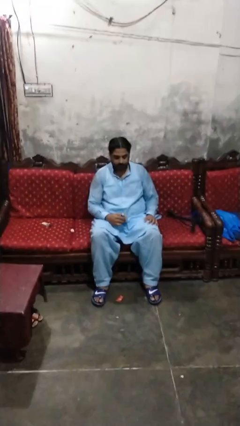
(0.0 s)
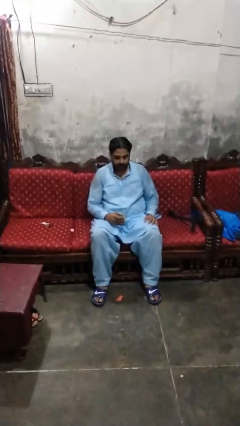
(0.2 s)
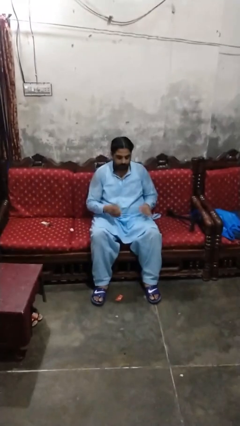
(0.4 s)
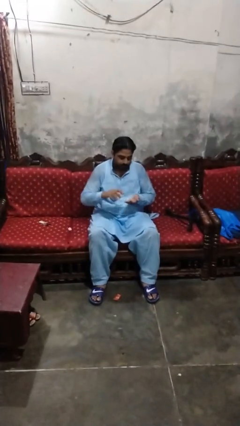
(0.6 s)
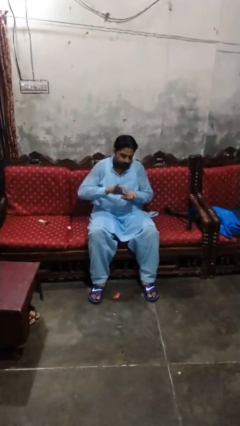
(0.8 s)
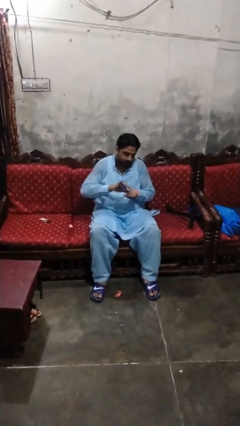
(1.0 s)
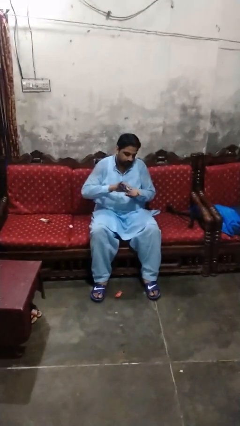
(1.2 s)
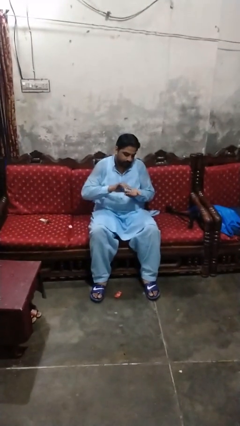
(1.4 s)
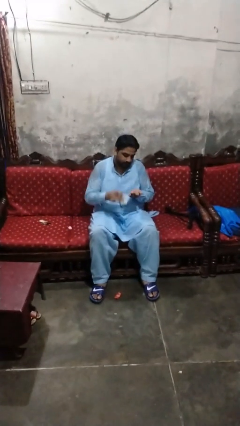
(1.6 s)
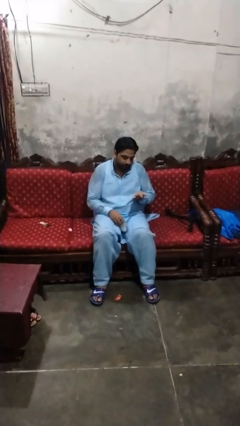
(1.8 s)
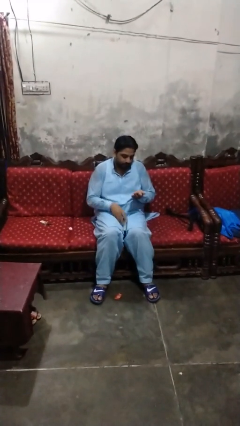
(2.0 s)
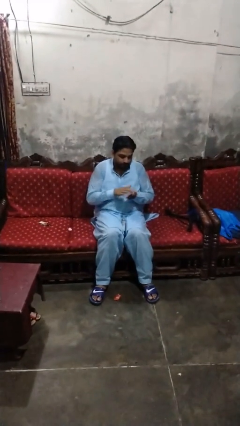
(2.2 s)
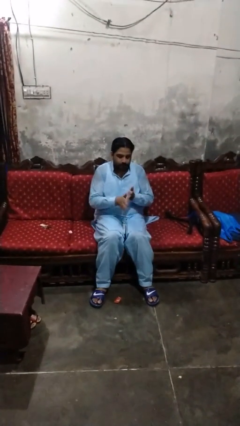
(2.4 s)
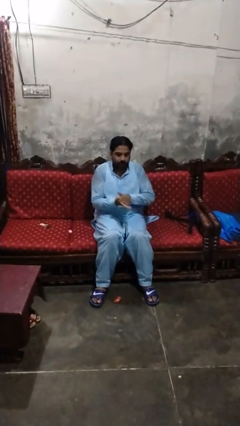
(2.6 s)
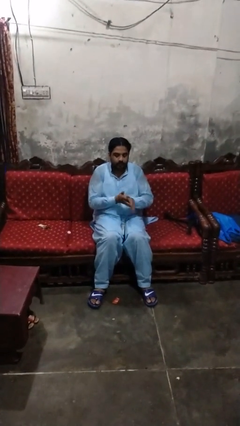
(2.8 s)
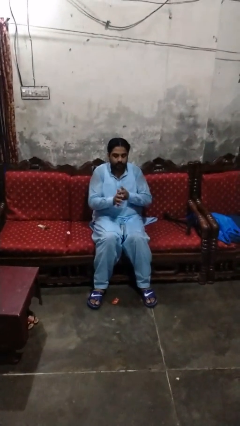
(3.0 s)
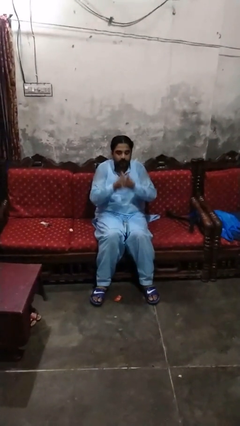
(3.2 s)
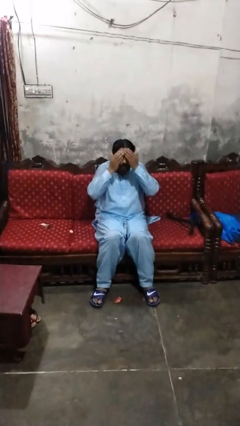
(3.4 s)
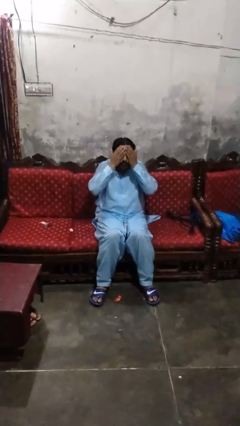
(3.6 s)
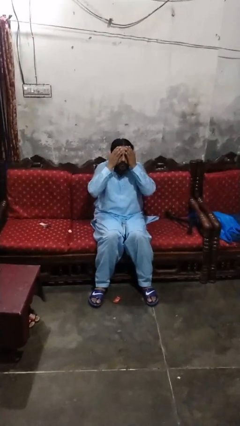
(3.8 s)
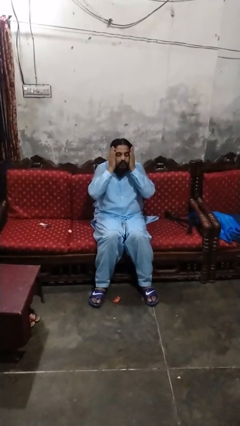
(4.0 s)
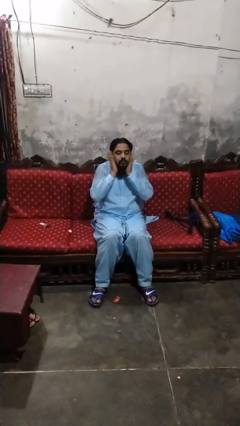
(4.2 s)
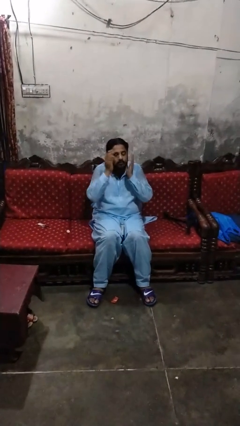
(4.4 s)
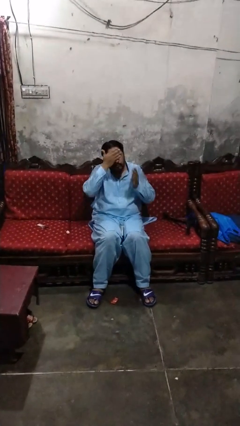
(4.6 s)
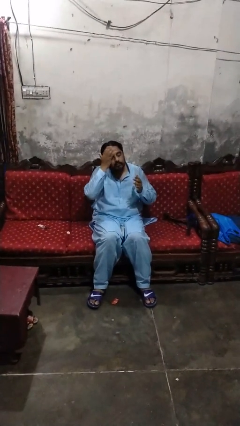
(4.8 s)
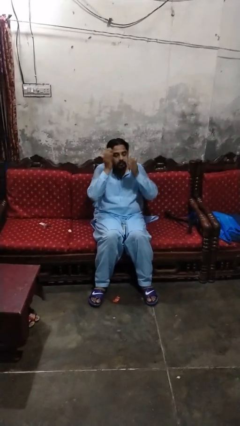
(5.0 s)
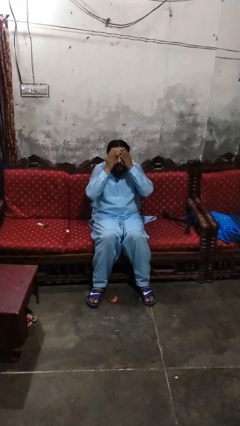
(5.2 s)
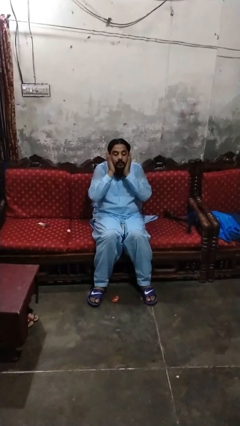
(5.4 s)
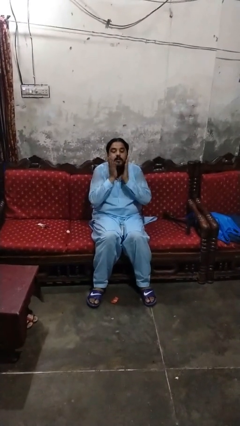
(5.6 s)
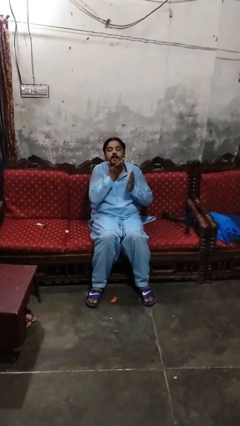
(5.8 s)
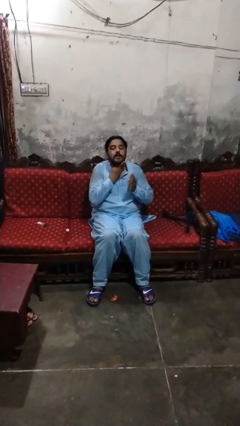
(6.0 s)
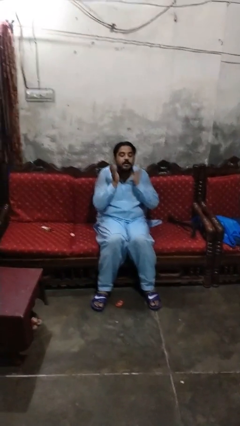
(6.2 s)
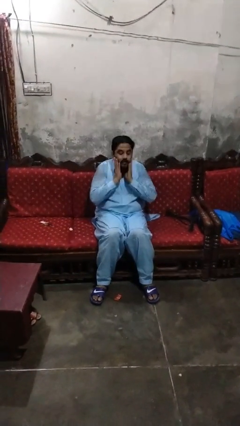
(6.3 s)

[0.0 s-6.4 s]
person applies facial moisturizer

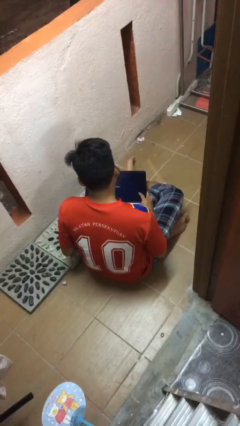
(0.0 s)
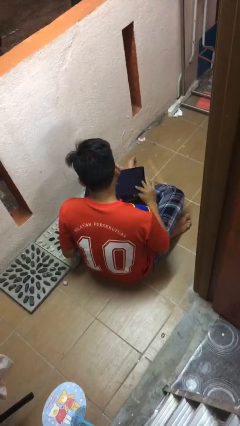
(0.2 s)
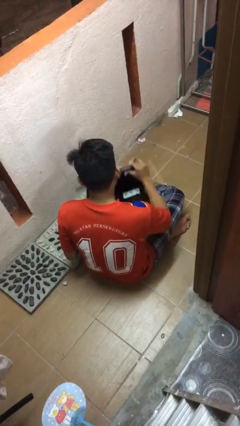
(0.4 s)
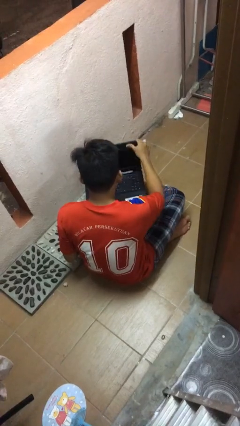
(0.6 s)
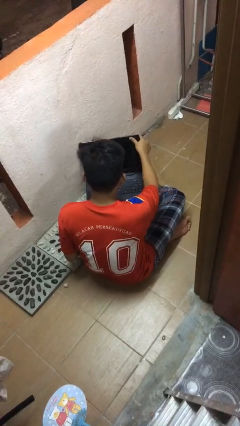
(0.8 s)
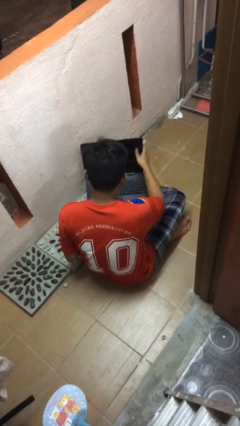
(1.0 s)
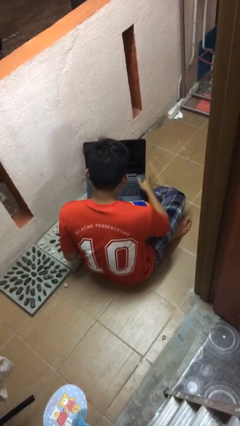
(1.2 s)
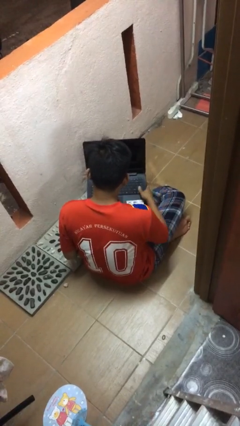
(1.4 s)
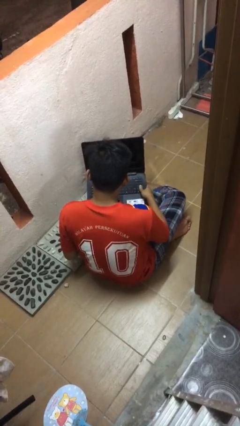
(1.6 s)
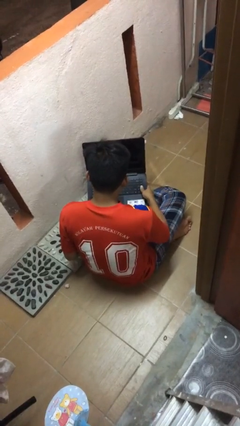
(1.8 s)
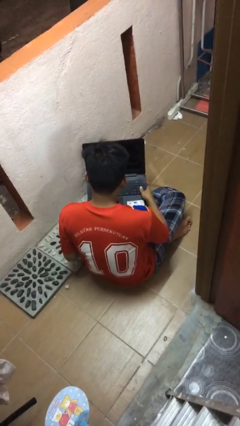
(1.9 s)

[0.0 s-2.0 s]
person opens laptop

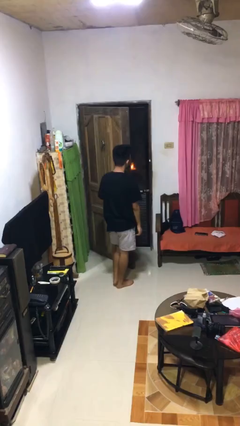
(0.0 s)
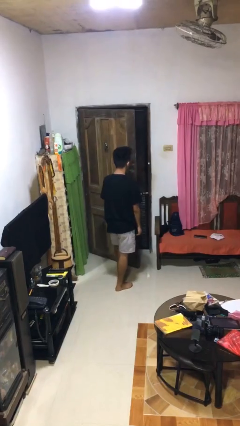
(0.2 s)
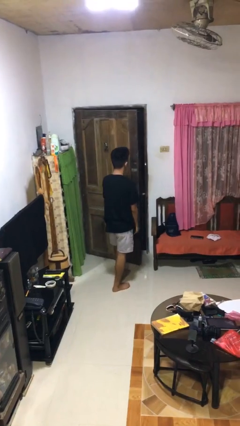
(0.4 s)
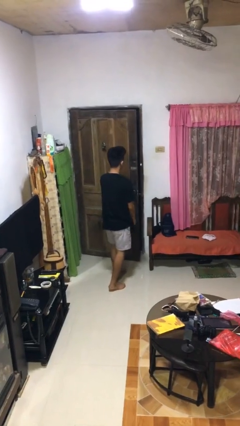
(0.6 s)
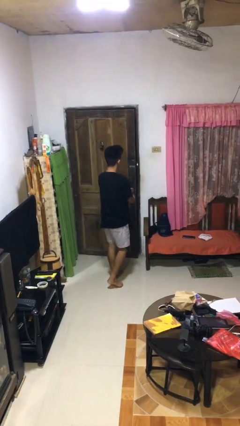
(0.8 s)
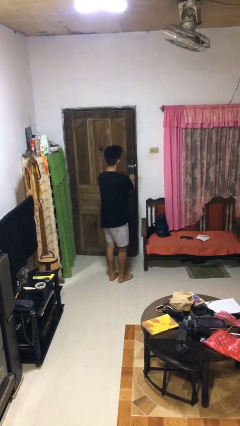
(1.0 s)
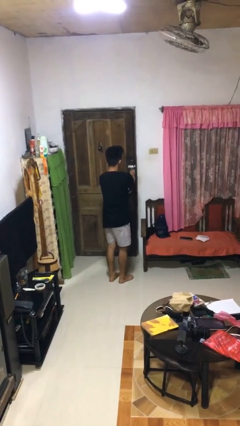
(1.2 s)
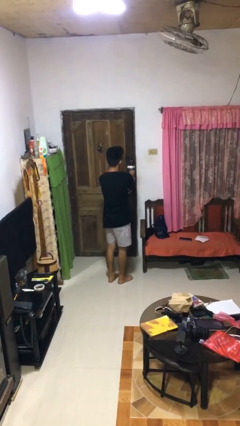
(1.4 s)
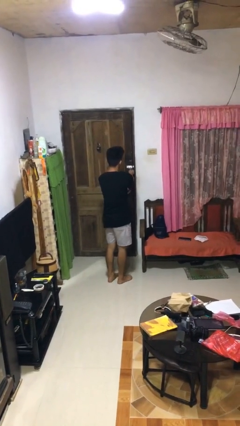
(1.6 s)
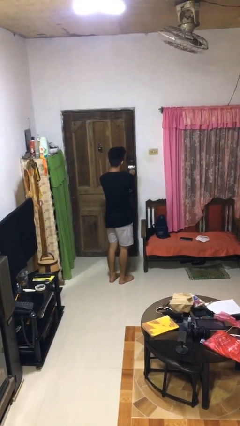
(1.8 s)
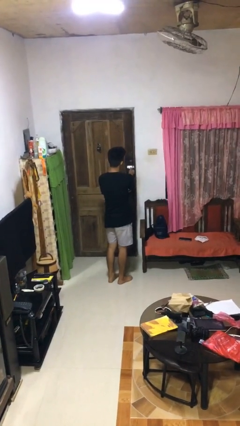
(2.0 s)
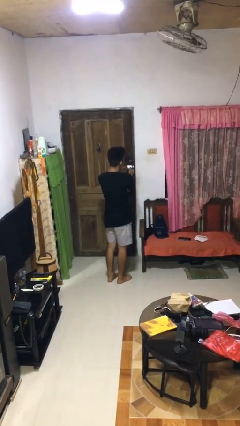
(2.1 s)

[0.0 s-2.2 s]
person closes facility door

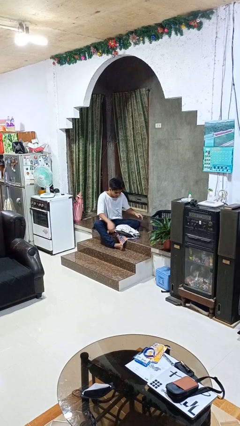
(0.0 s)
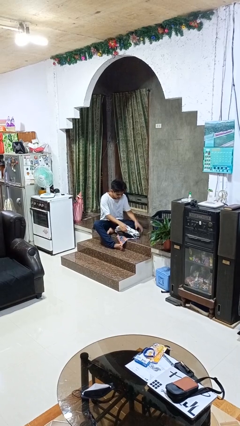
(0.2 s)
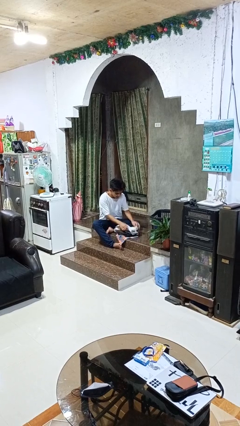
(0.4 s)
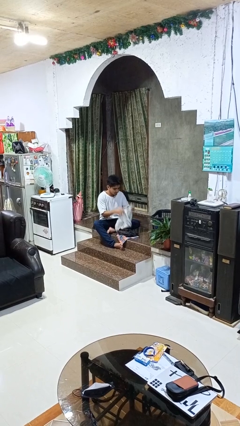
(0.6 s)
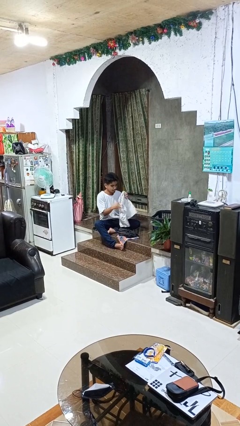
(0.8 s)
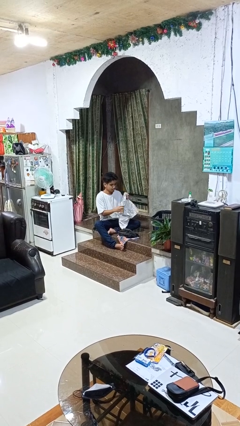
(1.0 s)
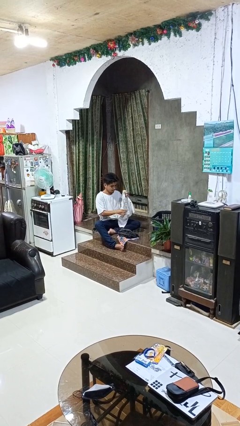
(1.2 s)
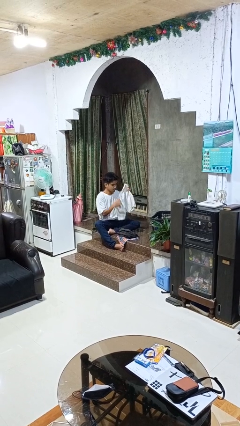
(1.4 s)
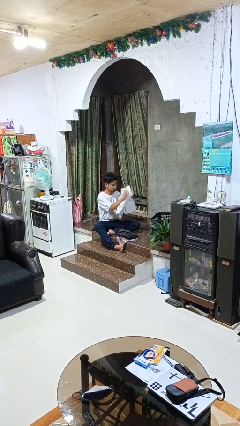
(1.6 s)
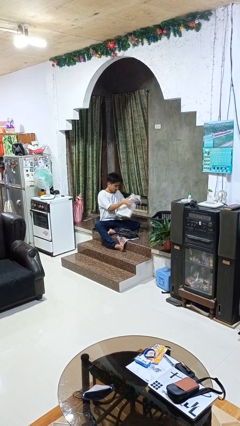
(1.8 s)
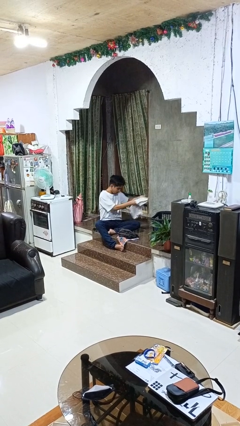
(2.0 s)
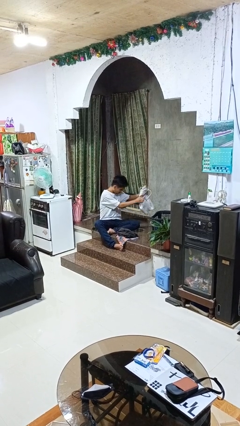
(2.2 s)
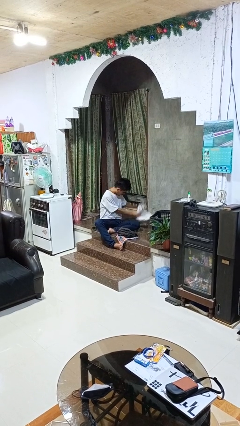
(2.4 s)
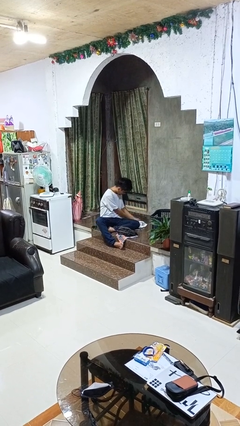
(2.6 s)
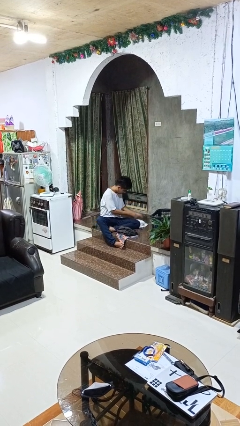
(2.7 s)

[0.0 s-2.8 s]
person folds pants

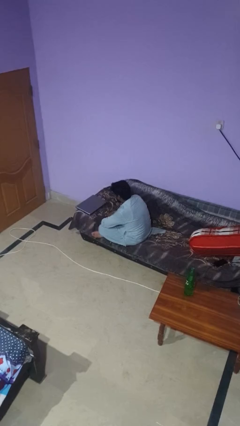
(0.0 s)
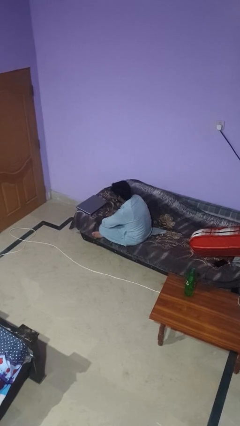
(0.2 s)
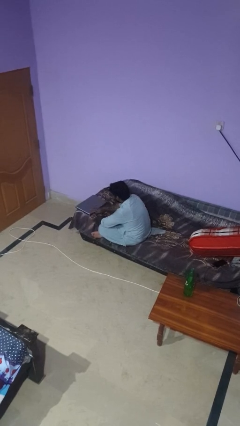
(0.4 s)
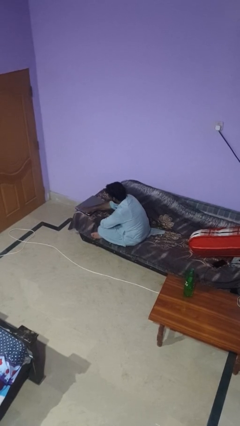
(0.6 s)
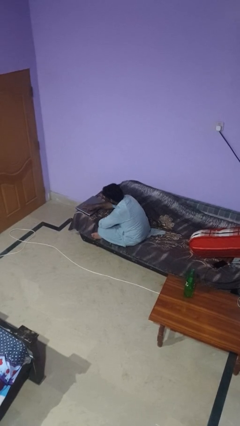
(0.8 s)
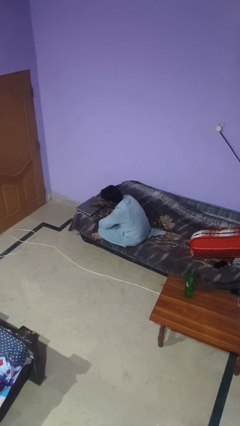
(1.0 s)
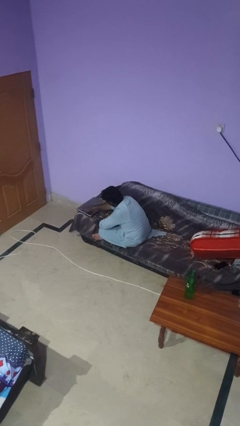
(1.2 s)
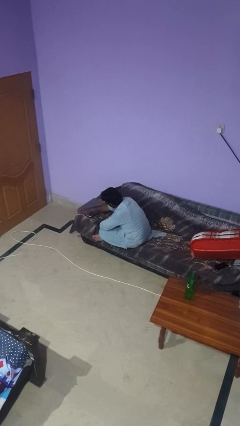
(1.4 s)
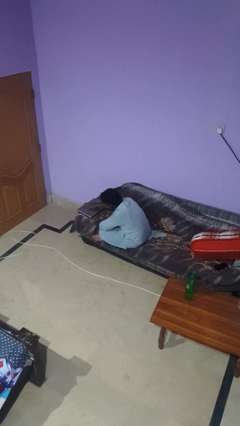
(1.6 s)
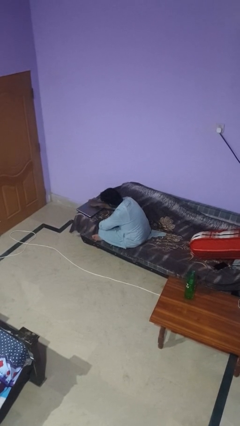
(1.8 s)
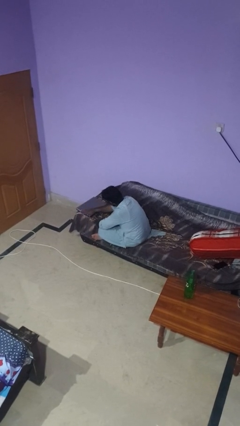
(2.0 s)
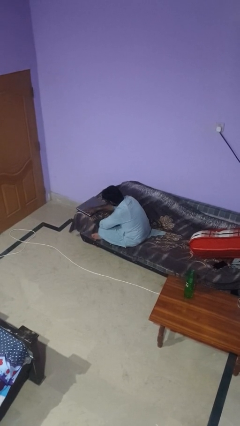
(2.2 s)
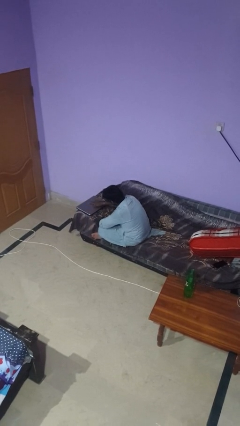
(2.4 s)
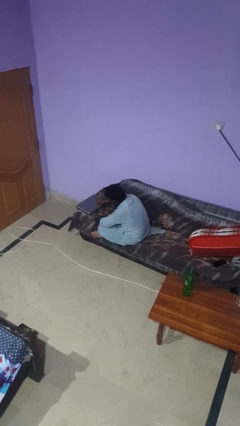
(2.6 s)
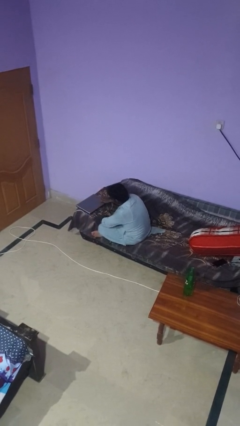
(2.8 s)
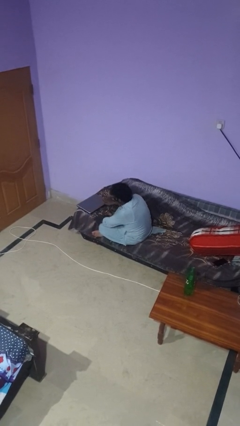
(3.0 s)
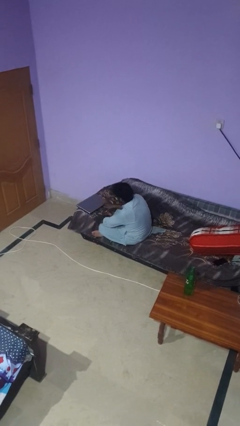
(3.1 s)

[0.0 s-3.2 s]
person waves hand over object

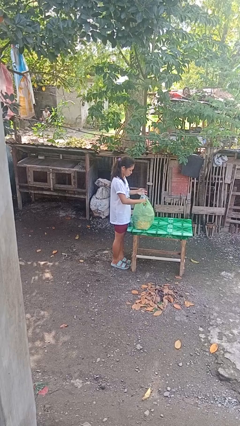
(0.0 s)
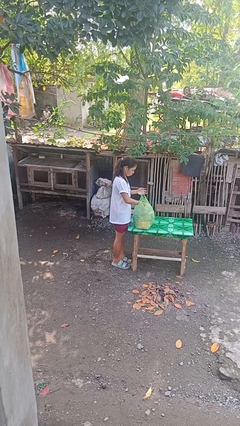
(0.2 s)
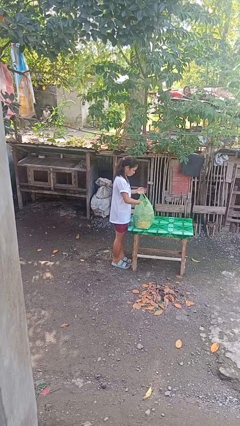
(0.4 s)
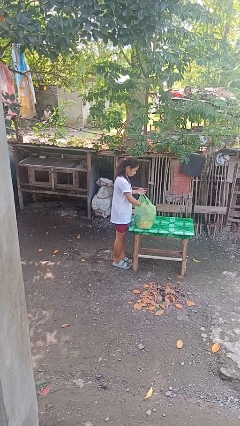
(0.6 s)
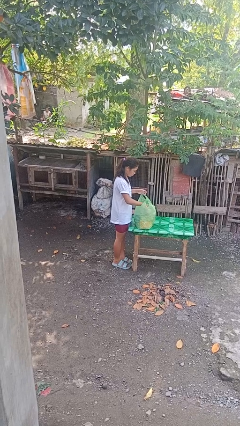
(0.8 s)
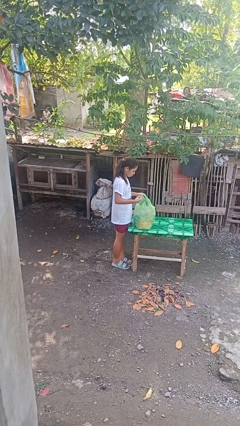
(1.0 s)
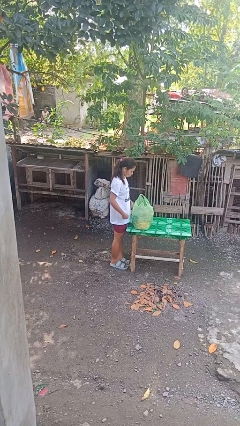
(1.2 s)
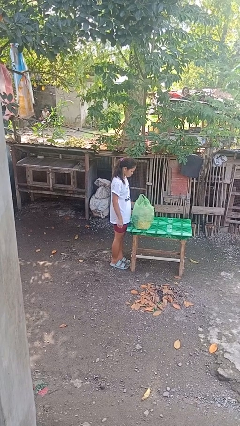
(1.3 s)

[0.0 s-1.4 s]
person puts object into bag
